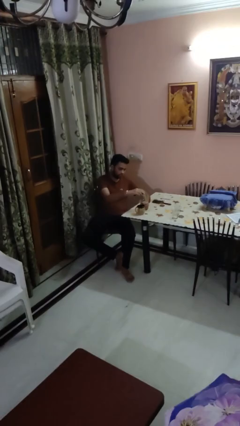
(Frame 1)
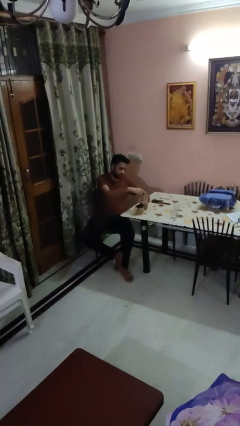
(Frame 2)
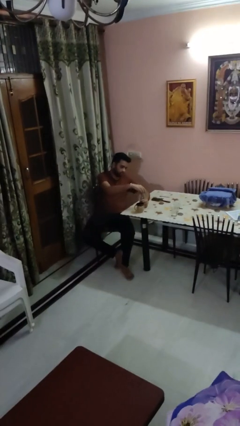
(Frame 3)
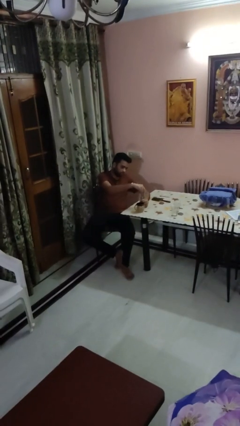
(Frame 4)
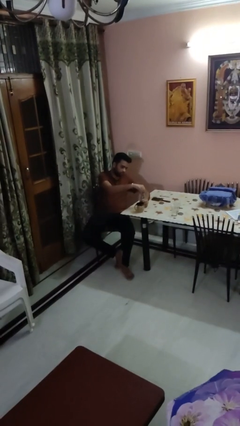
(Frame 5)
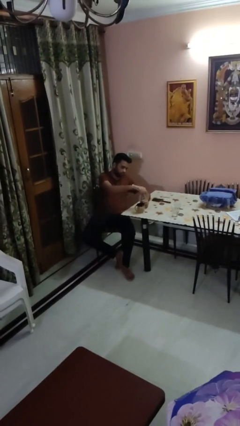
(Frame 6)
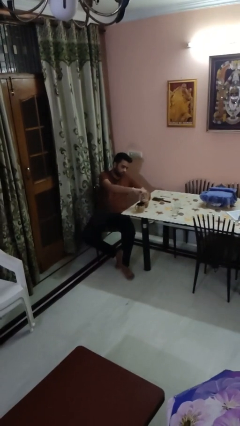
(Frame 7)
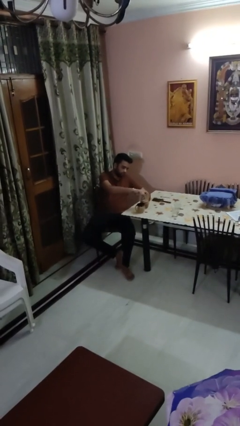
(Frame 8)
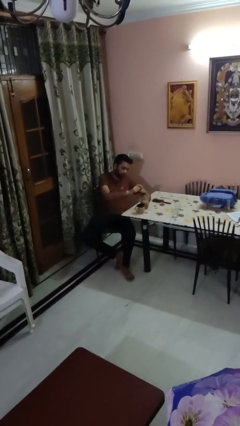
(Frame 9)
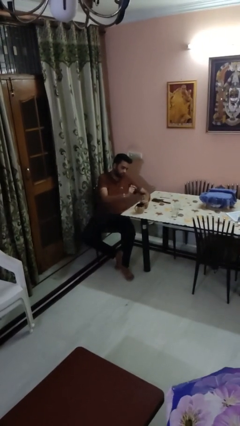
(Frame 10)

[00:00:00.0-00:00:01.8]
person screws lid to bottle

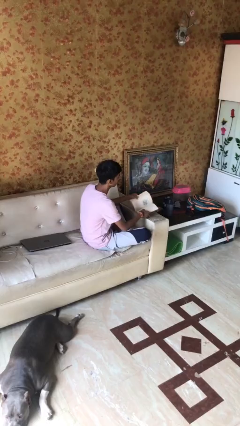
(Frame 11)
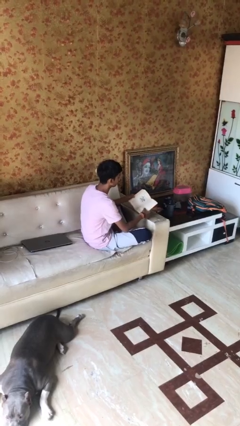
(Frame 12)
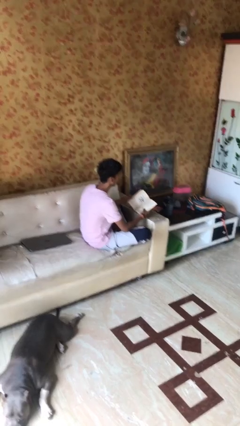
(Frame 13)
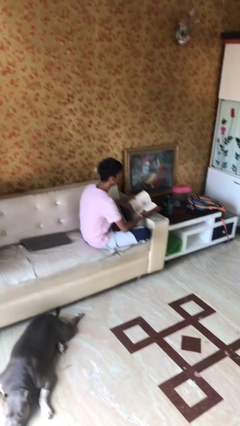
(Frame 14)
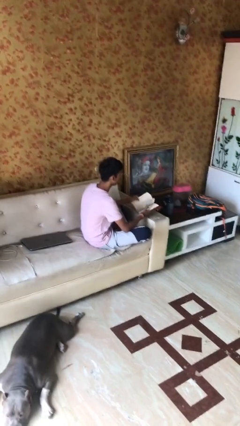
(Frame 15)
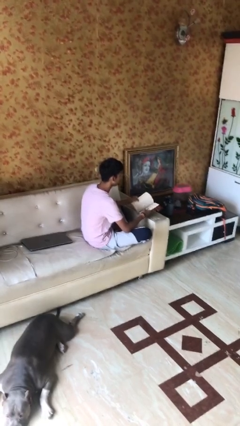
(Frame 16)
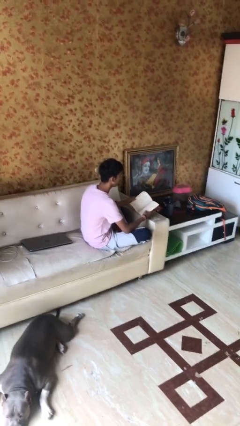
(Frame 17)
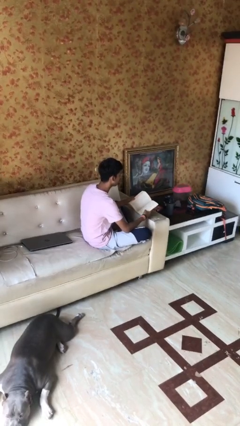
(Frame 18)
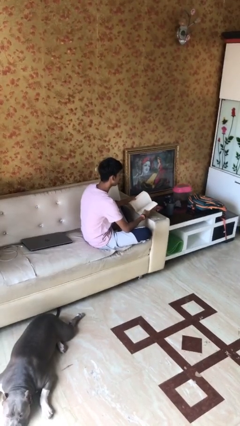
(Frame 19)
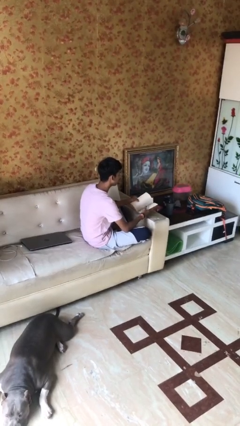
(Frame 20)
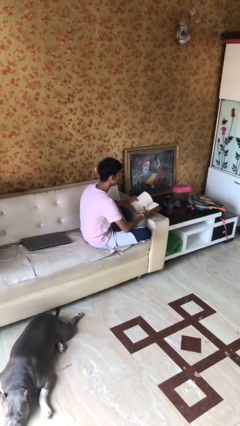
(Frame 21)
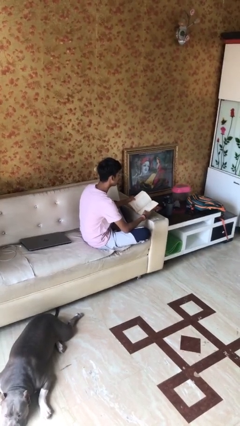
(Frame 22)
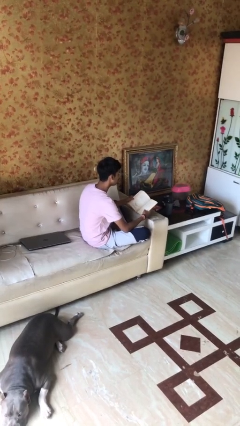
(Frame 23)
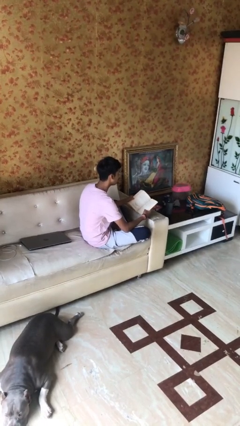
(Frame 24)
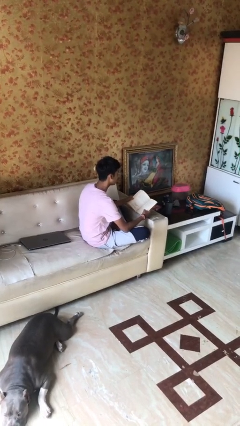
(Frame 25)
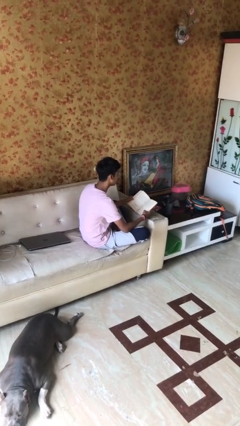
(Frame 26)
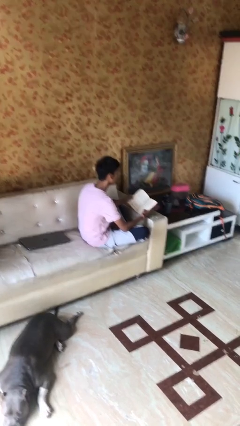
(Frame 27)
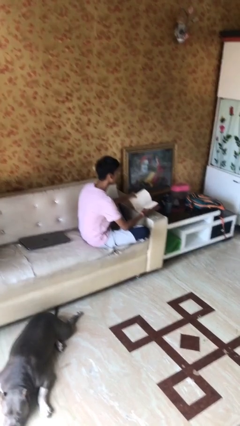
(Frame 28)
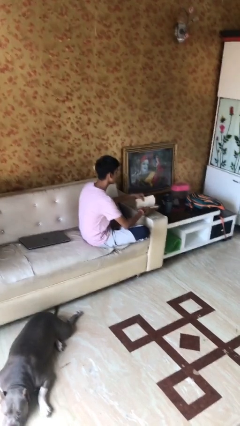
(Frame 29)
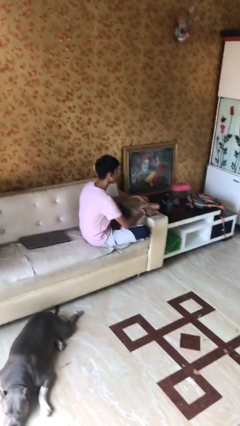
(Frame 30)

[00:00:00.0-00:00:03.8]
person reads book

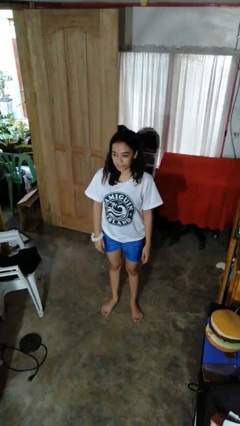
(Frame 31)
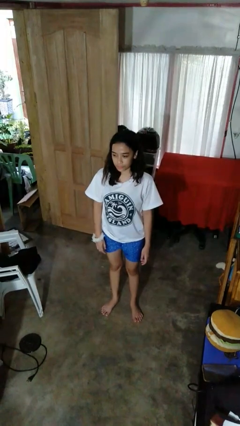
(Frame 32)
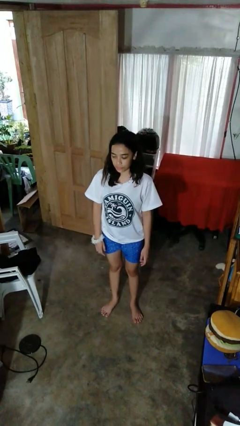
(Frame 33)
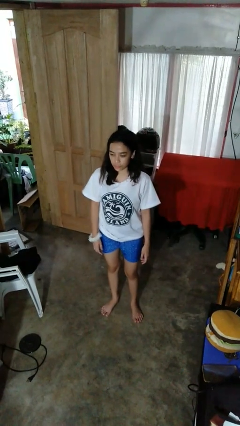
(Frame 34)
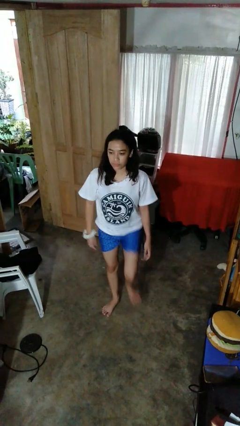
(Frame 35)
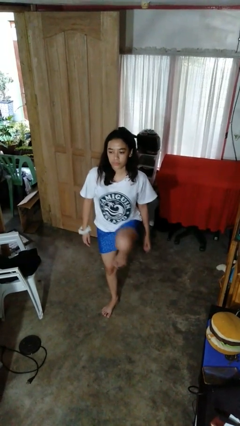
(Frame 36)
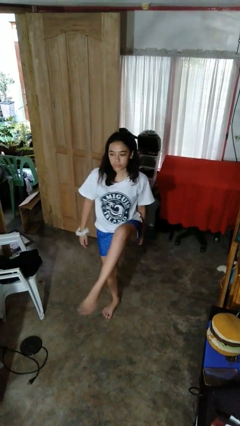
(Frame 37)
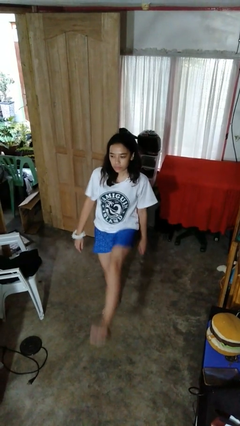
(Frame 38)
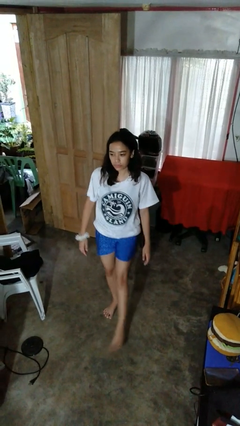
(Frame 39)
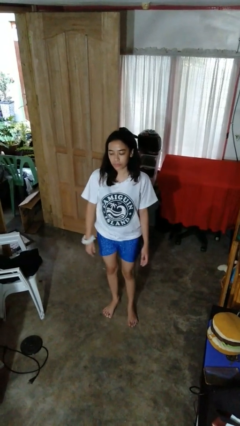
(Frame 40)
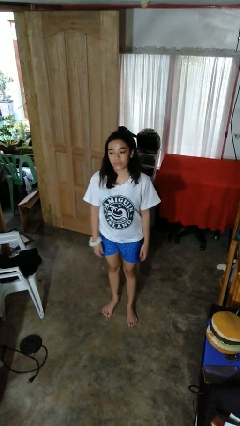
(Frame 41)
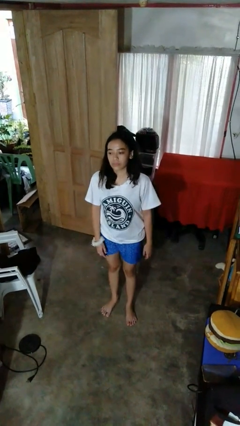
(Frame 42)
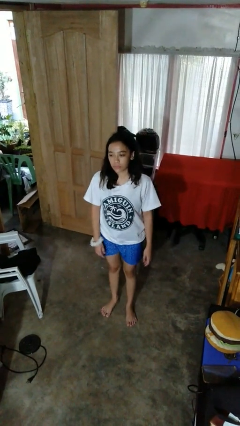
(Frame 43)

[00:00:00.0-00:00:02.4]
person karate kicks

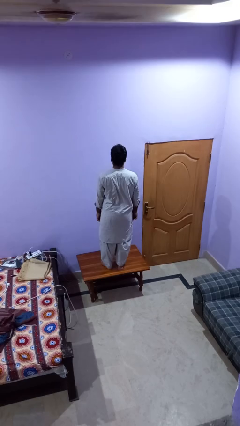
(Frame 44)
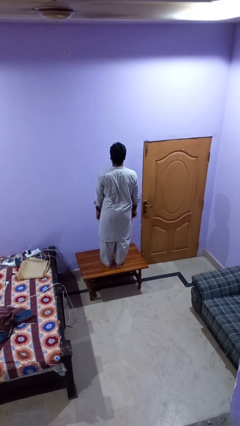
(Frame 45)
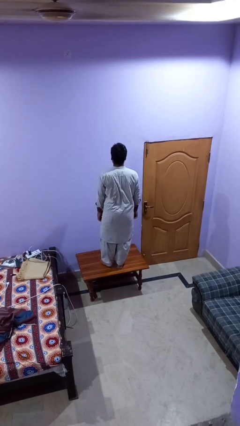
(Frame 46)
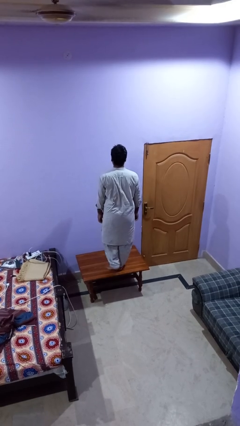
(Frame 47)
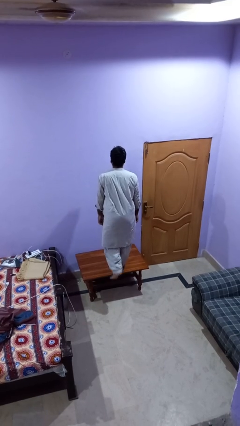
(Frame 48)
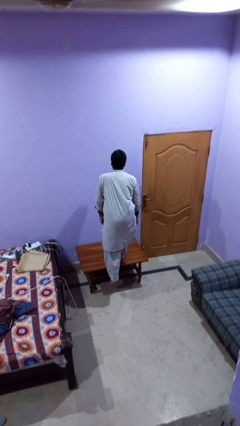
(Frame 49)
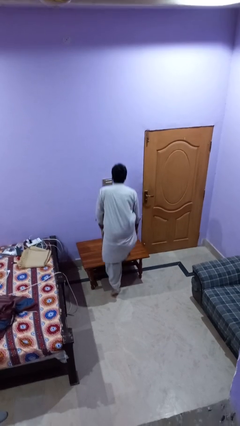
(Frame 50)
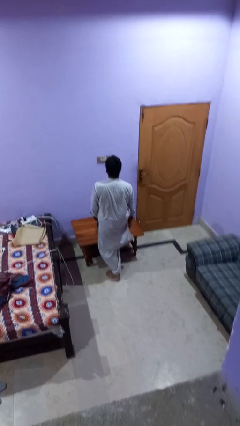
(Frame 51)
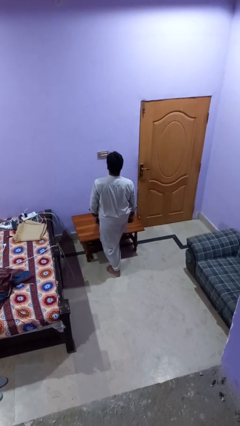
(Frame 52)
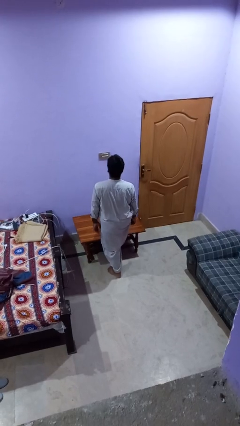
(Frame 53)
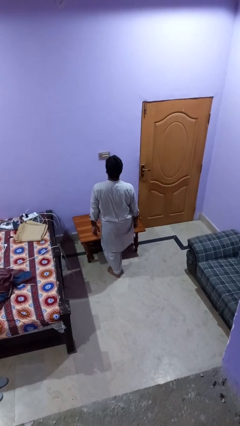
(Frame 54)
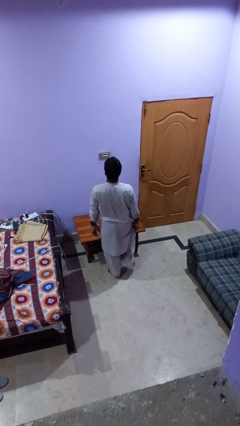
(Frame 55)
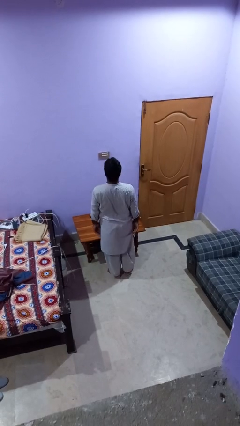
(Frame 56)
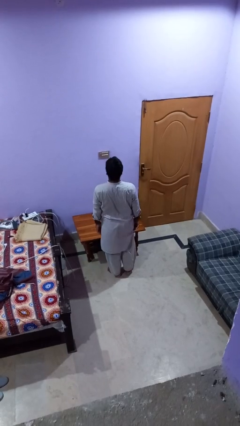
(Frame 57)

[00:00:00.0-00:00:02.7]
person climbs off table

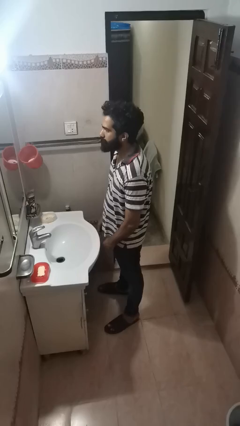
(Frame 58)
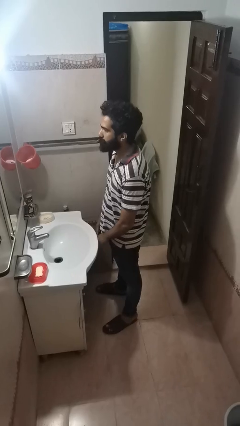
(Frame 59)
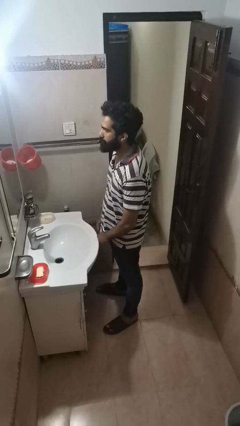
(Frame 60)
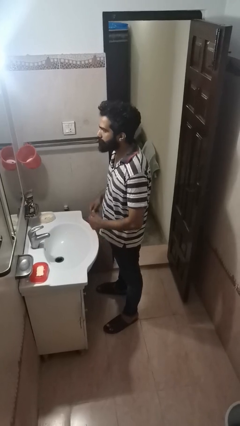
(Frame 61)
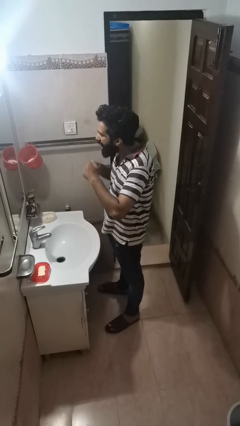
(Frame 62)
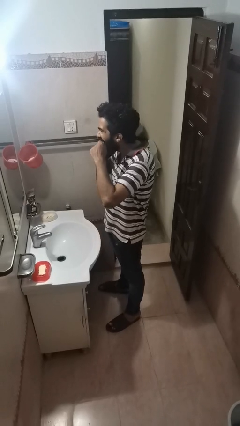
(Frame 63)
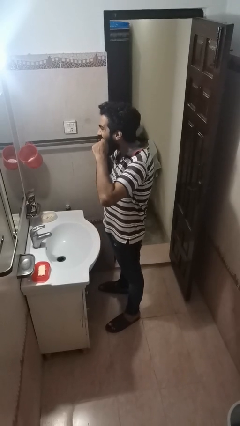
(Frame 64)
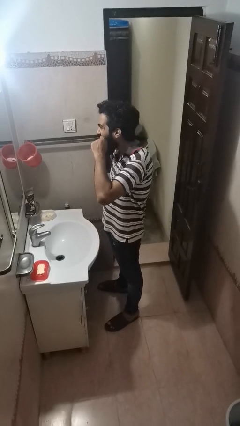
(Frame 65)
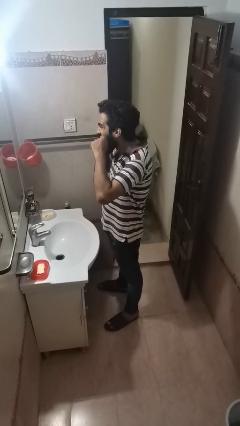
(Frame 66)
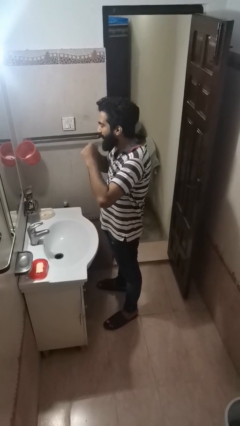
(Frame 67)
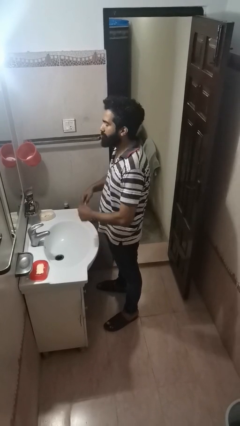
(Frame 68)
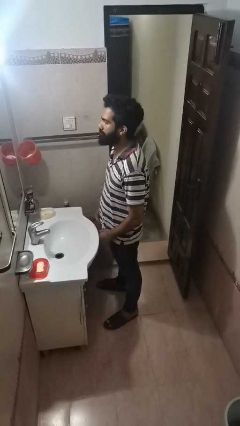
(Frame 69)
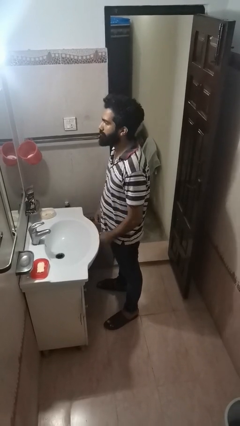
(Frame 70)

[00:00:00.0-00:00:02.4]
person flosses

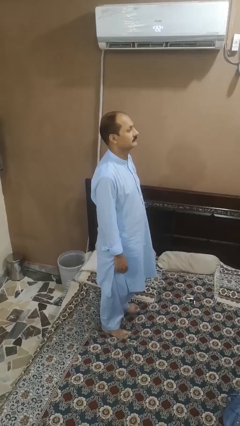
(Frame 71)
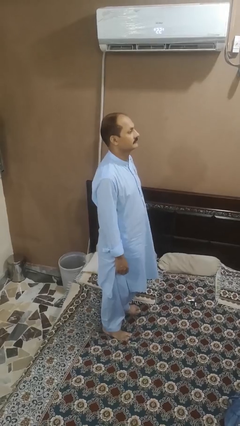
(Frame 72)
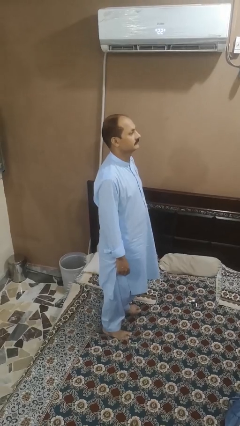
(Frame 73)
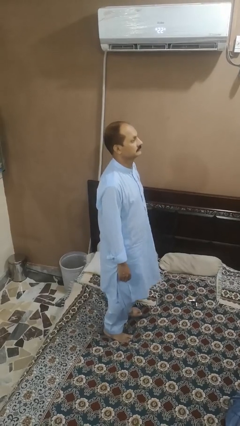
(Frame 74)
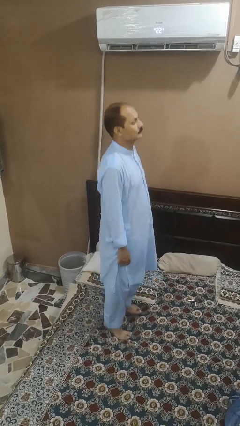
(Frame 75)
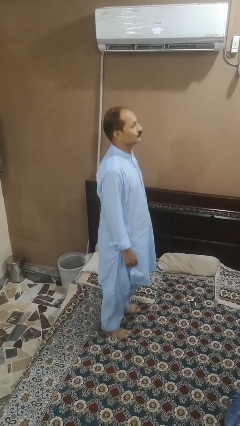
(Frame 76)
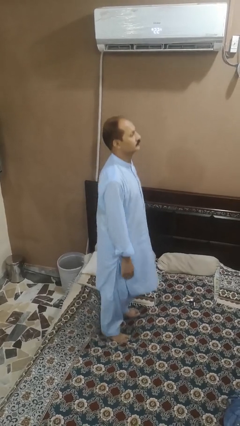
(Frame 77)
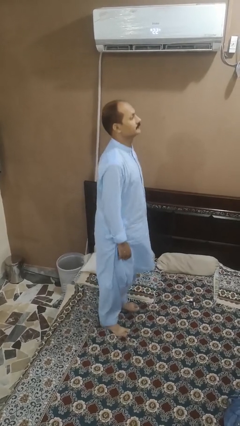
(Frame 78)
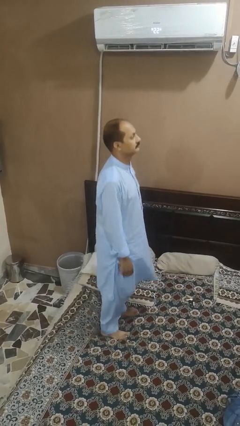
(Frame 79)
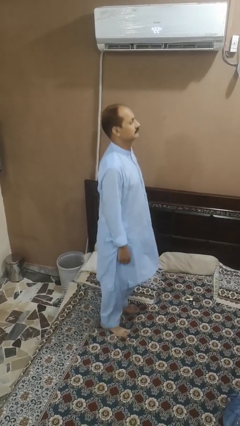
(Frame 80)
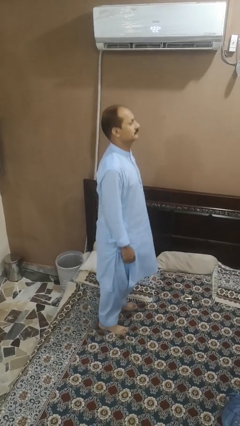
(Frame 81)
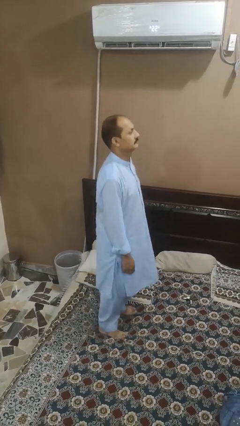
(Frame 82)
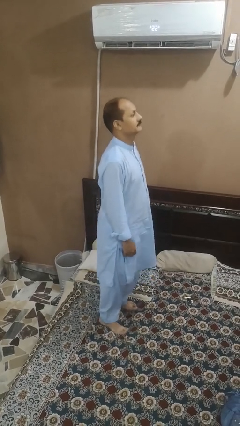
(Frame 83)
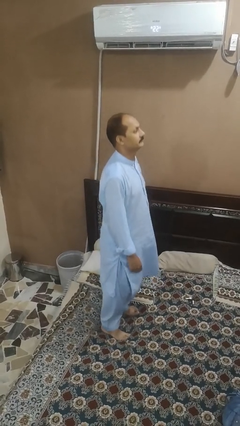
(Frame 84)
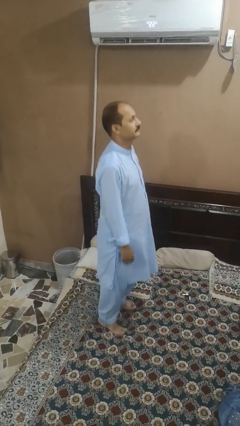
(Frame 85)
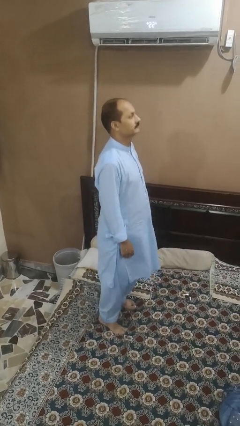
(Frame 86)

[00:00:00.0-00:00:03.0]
person jumps on bed

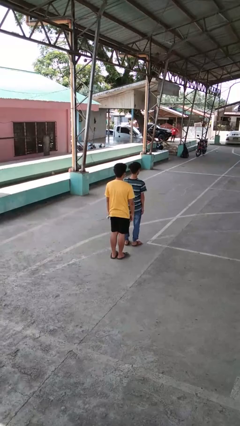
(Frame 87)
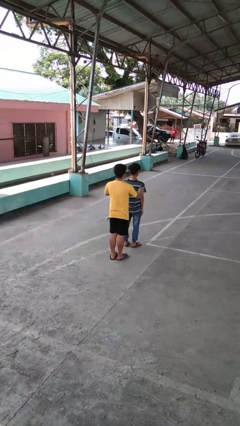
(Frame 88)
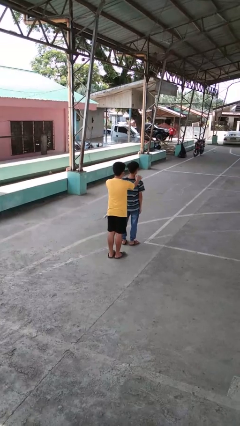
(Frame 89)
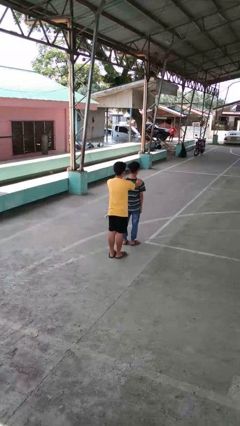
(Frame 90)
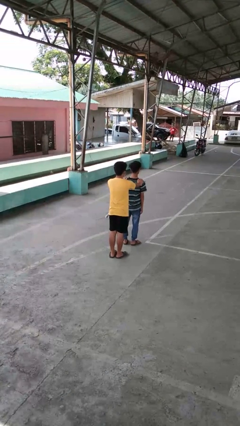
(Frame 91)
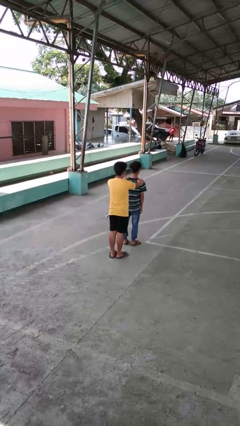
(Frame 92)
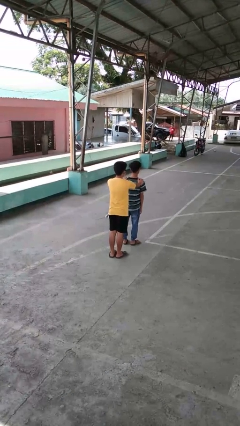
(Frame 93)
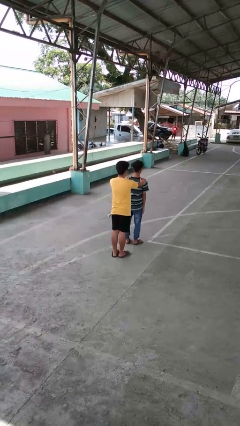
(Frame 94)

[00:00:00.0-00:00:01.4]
person grabs person by shoulder
